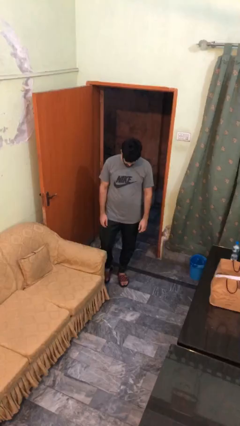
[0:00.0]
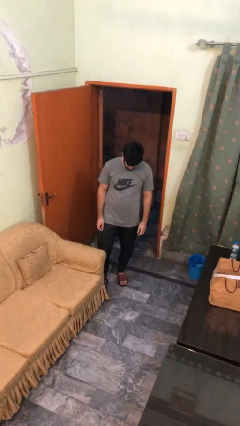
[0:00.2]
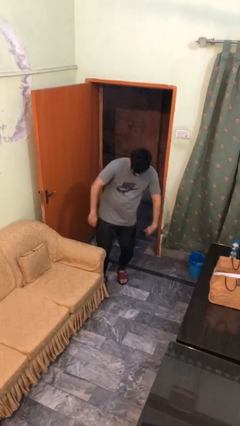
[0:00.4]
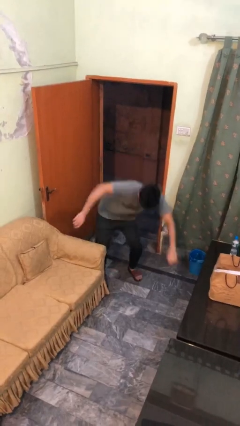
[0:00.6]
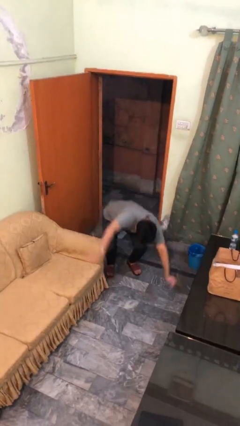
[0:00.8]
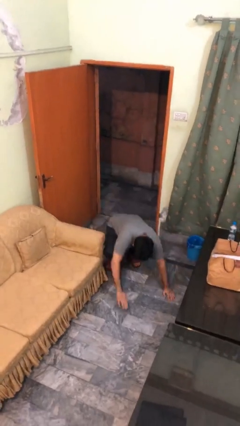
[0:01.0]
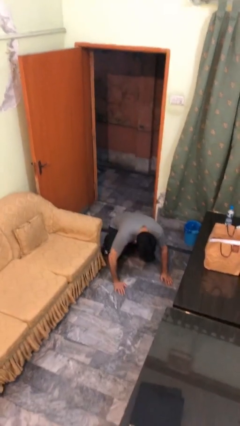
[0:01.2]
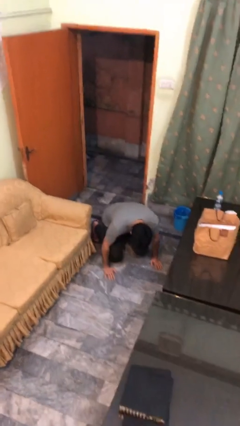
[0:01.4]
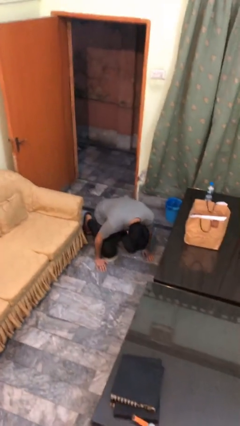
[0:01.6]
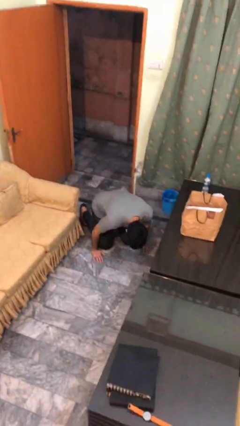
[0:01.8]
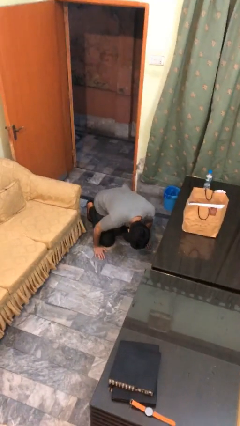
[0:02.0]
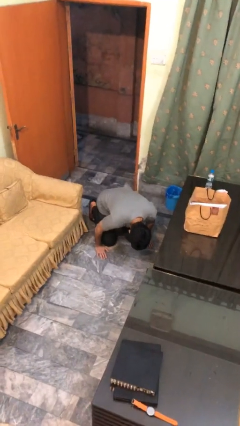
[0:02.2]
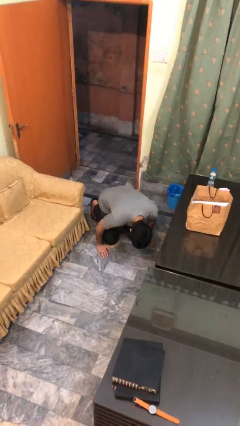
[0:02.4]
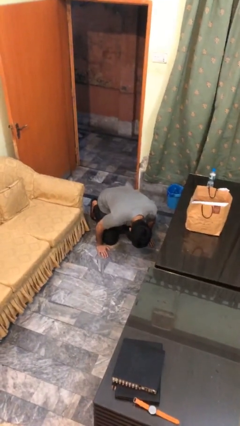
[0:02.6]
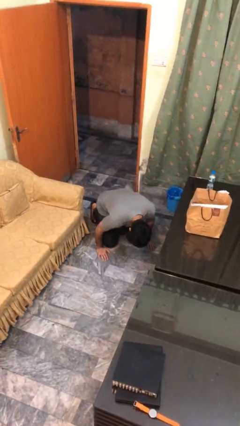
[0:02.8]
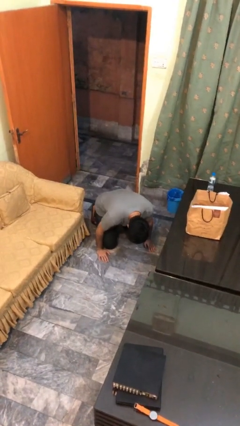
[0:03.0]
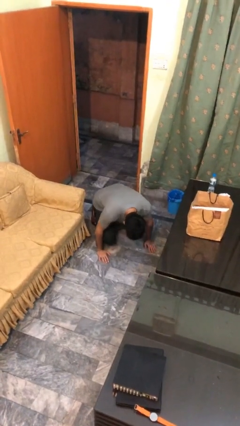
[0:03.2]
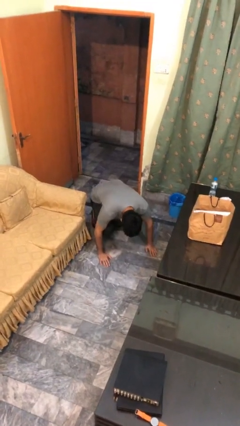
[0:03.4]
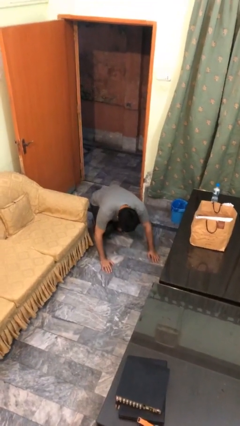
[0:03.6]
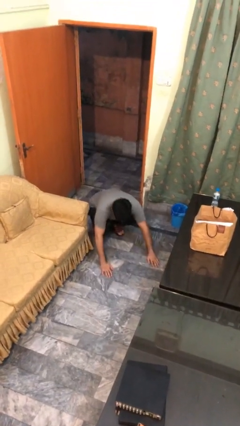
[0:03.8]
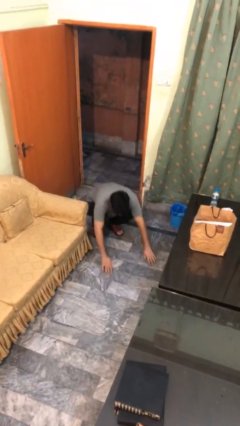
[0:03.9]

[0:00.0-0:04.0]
person trips on object on floor

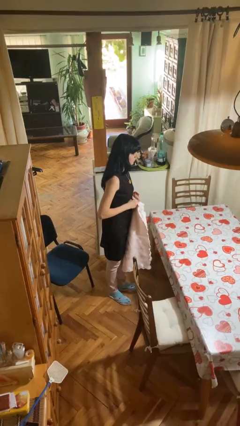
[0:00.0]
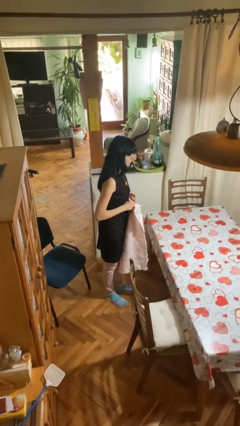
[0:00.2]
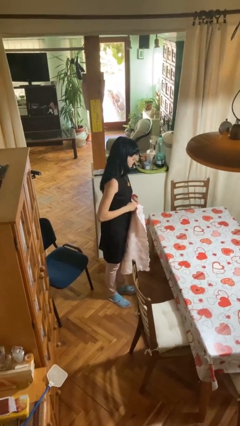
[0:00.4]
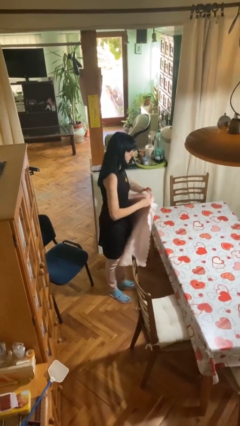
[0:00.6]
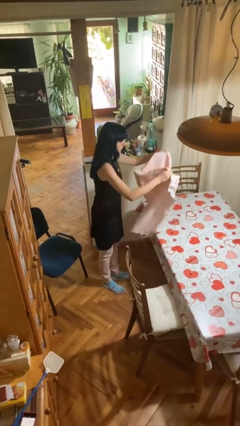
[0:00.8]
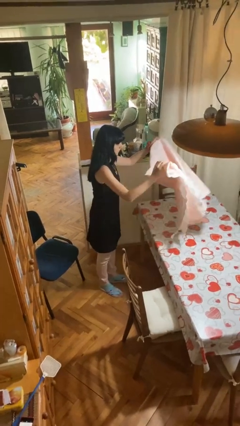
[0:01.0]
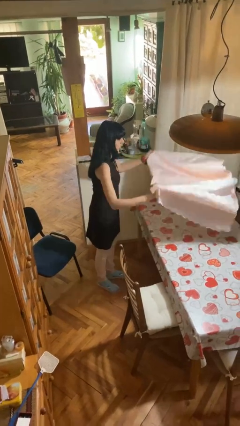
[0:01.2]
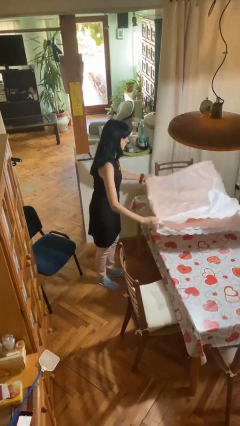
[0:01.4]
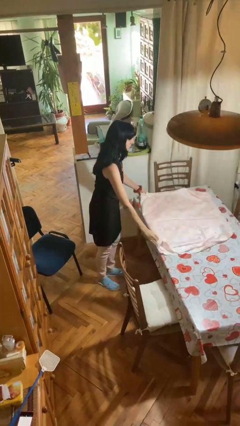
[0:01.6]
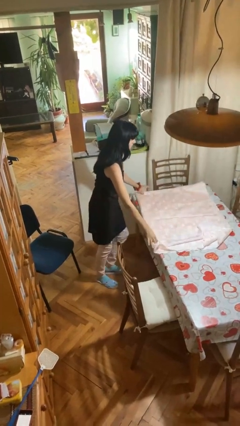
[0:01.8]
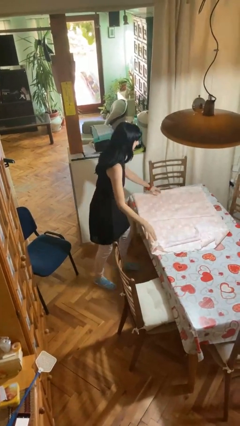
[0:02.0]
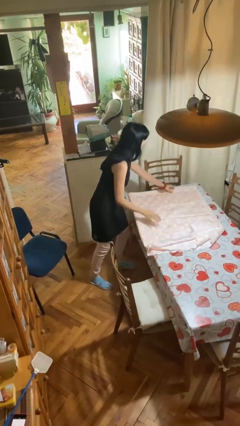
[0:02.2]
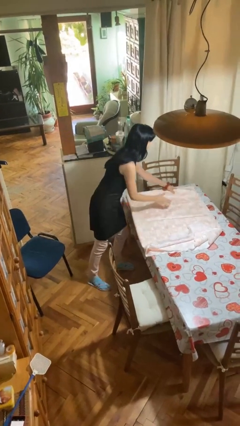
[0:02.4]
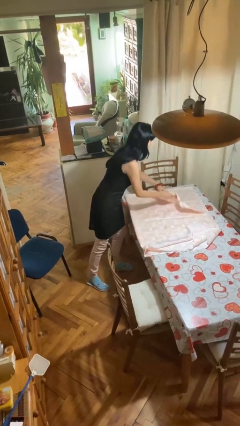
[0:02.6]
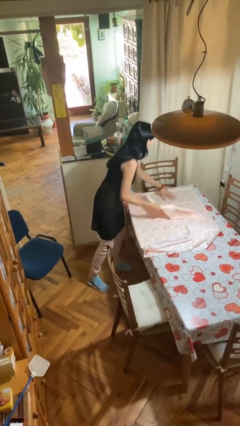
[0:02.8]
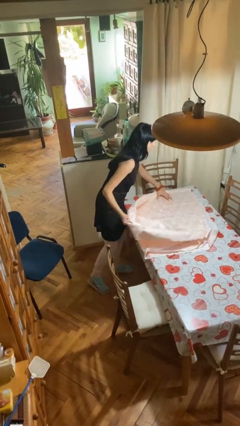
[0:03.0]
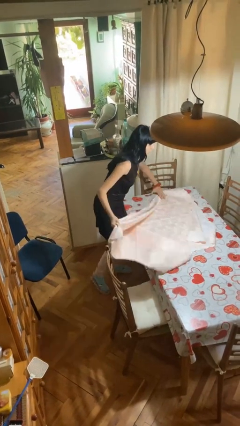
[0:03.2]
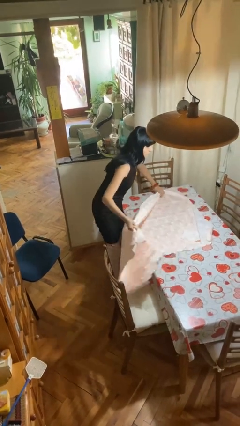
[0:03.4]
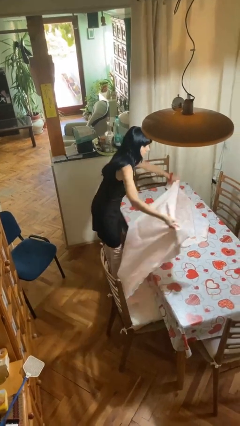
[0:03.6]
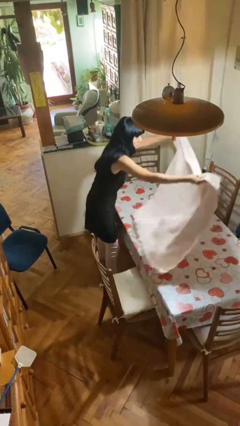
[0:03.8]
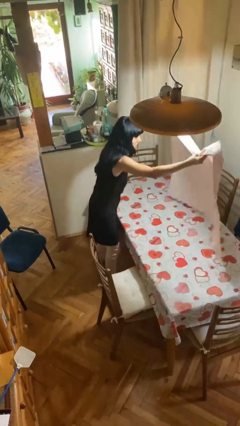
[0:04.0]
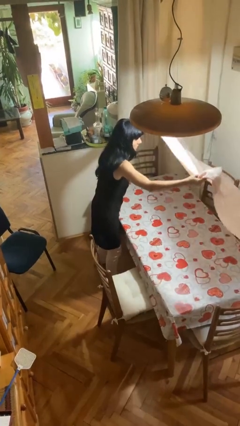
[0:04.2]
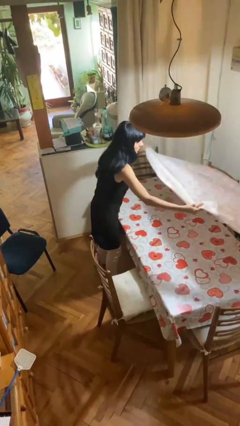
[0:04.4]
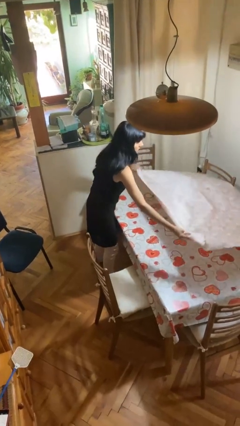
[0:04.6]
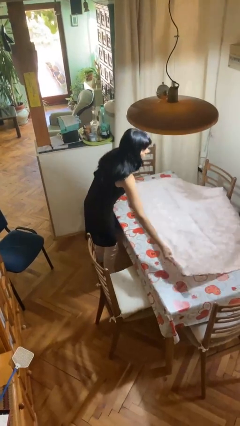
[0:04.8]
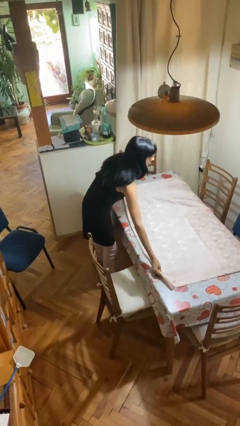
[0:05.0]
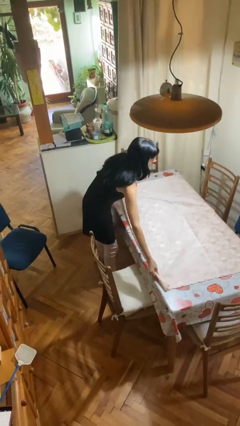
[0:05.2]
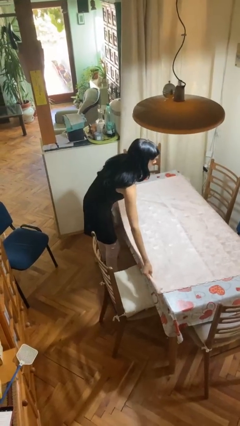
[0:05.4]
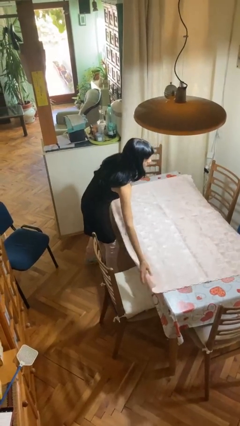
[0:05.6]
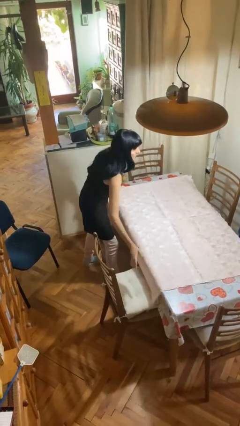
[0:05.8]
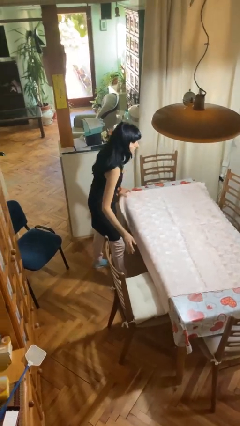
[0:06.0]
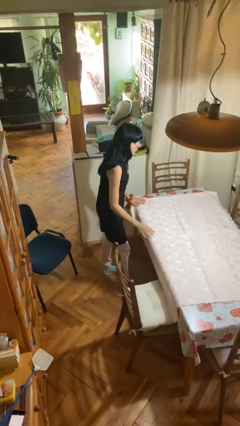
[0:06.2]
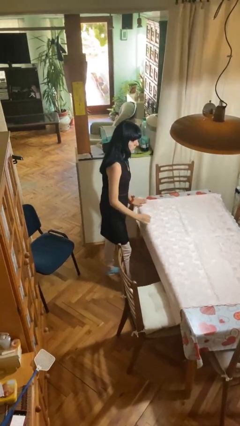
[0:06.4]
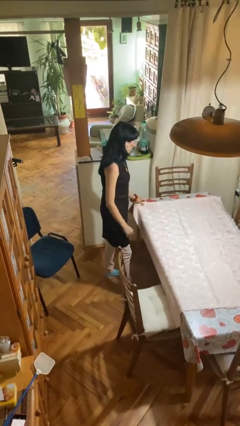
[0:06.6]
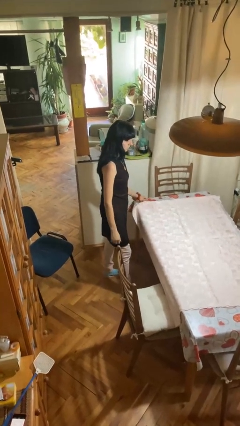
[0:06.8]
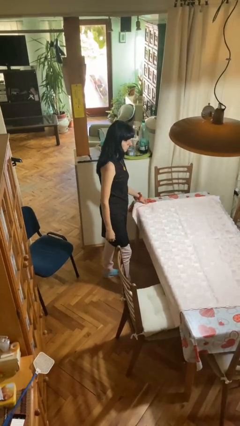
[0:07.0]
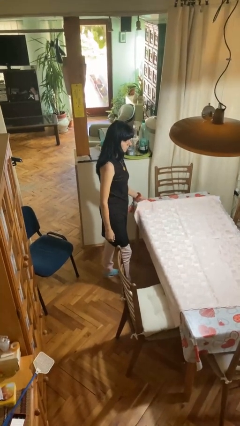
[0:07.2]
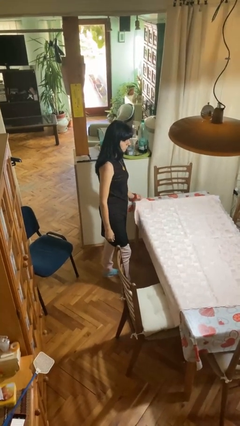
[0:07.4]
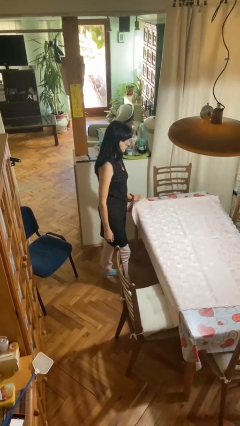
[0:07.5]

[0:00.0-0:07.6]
person spreads tablecloth

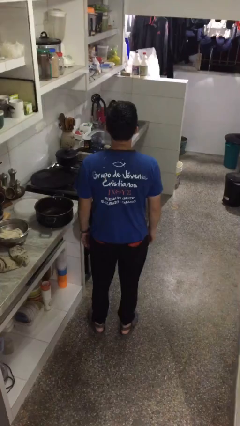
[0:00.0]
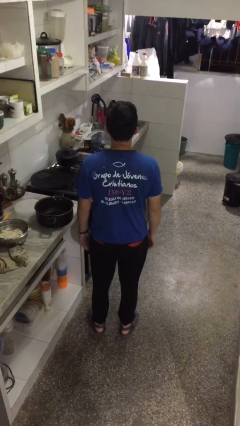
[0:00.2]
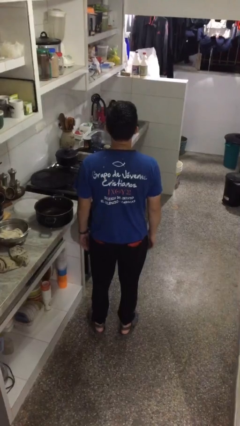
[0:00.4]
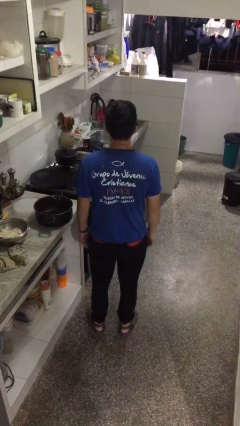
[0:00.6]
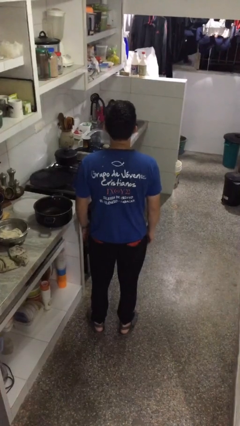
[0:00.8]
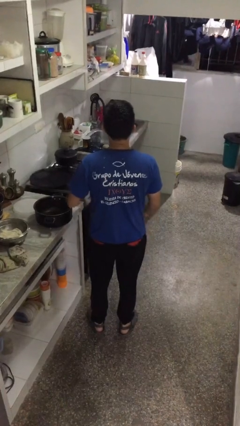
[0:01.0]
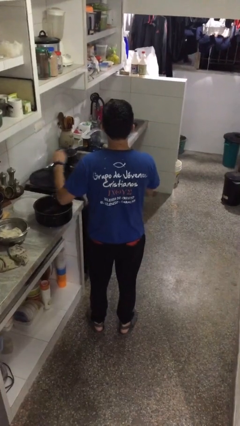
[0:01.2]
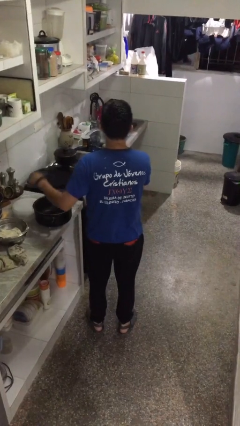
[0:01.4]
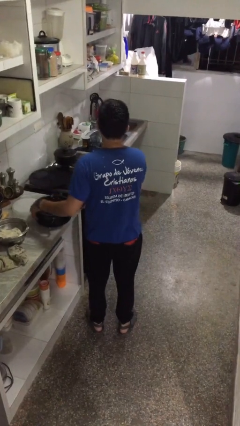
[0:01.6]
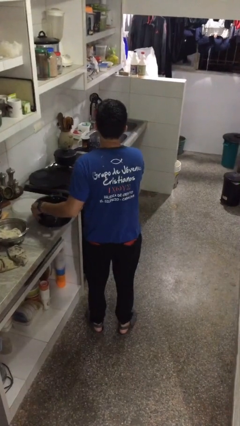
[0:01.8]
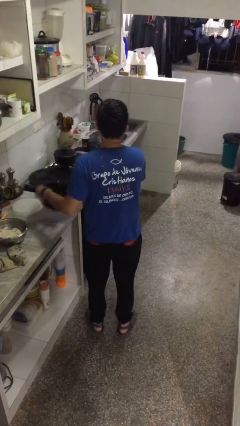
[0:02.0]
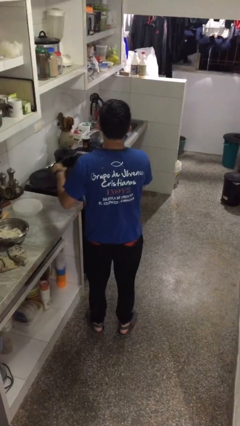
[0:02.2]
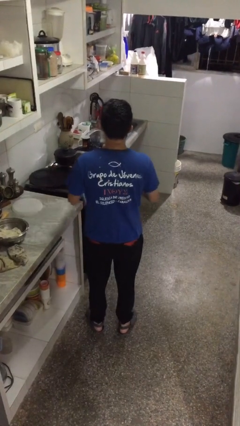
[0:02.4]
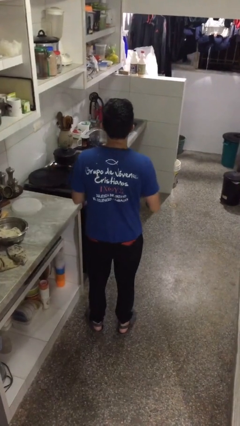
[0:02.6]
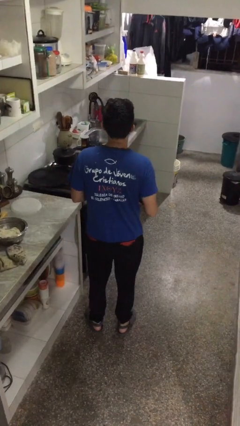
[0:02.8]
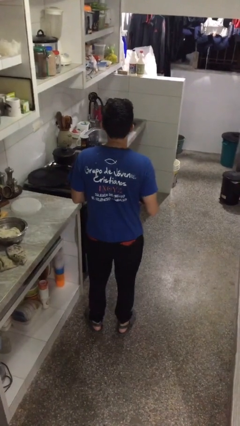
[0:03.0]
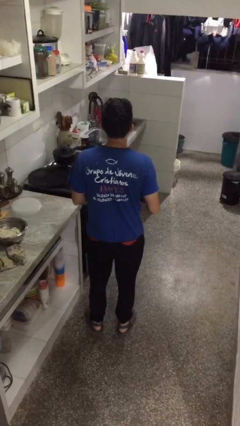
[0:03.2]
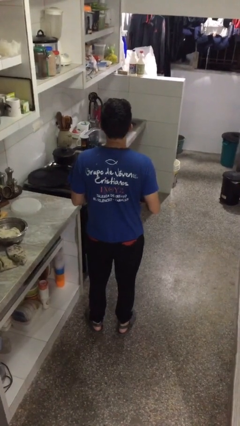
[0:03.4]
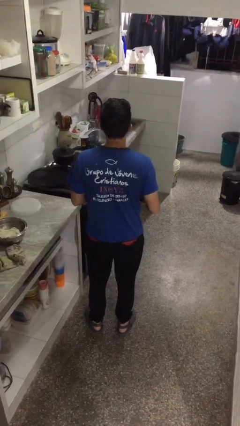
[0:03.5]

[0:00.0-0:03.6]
person picks up object from countertop

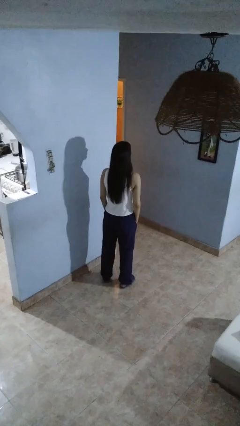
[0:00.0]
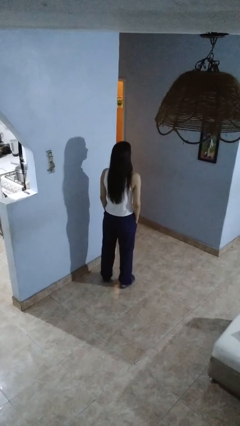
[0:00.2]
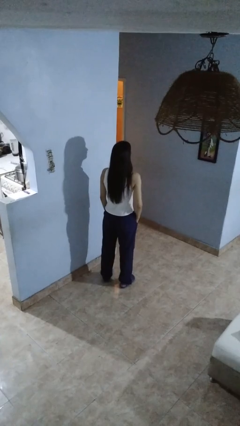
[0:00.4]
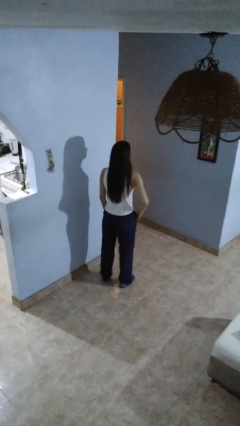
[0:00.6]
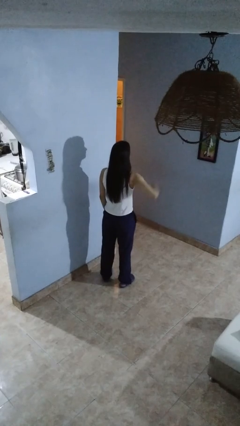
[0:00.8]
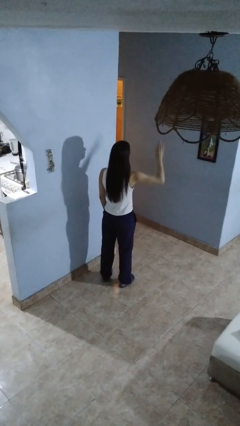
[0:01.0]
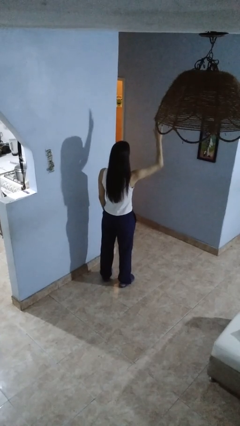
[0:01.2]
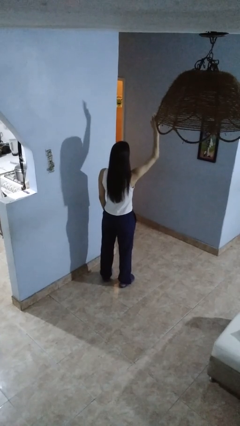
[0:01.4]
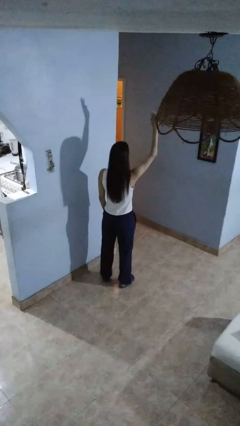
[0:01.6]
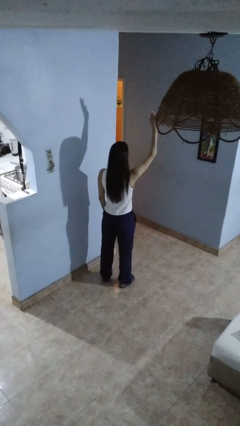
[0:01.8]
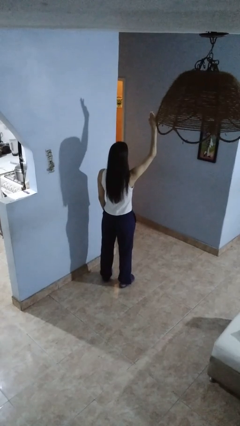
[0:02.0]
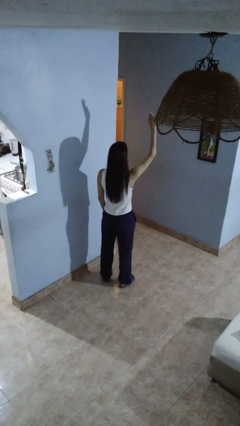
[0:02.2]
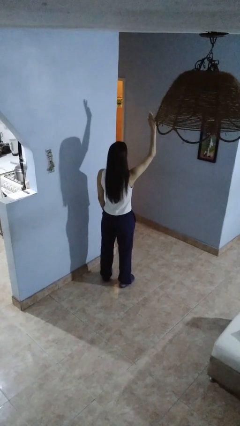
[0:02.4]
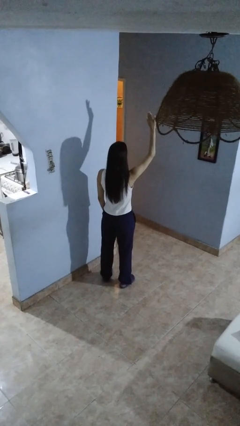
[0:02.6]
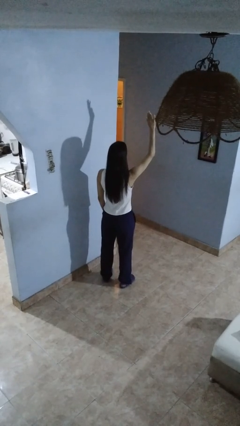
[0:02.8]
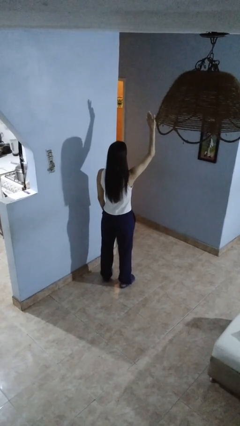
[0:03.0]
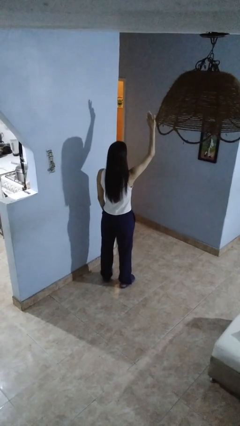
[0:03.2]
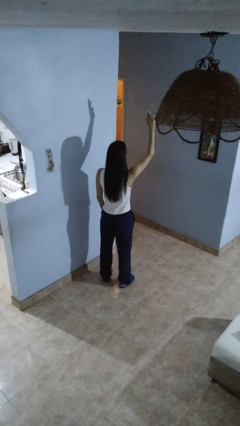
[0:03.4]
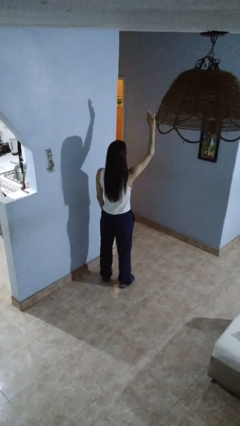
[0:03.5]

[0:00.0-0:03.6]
person gestures raise hand
